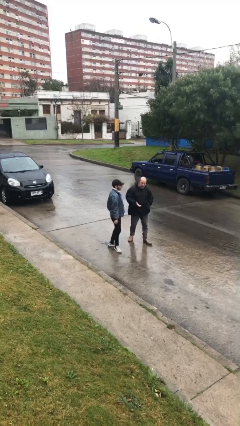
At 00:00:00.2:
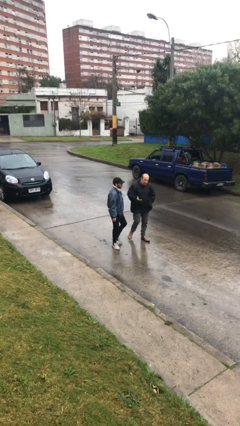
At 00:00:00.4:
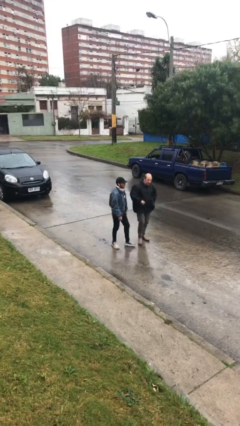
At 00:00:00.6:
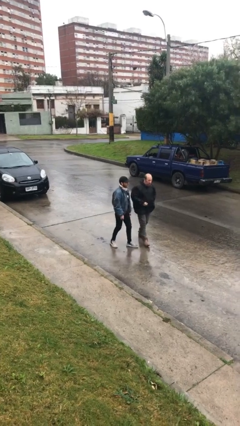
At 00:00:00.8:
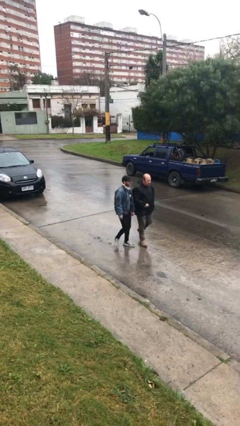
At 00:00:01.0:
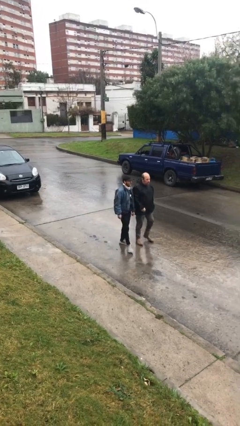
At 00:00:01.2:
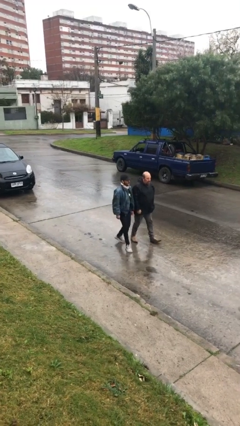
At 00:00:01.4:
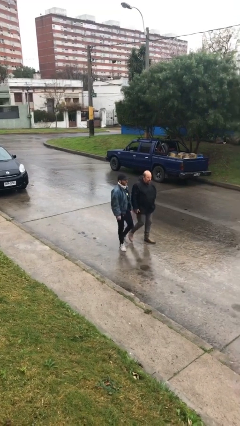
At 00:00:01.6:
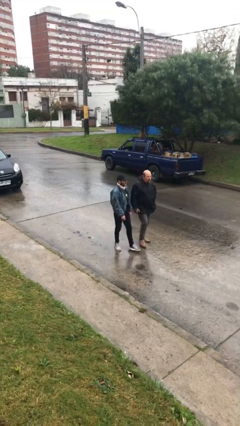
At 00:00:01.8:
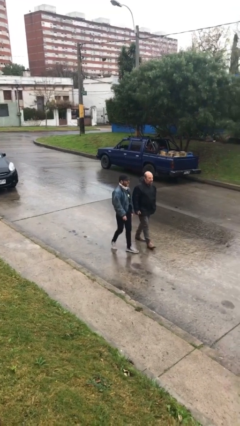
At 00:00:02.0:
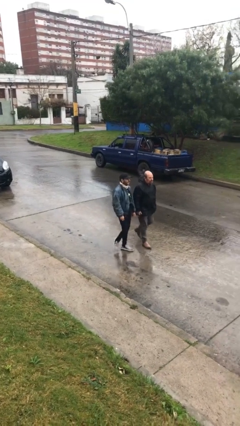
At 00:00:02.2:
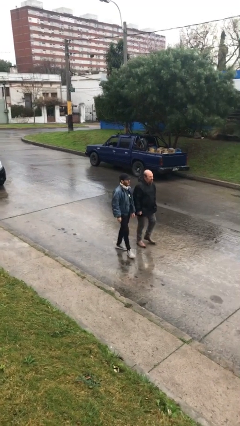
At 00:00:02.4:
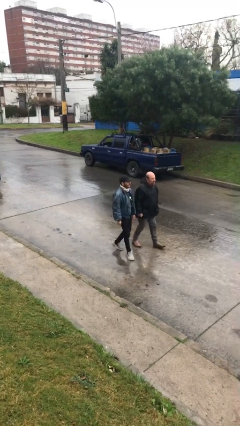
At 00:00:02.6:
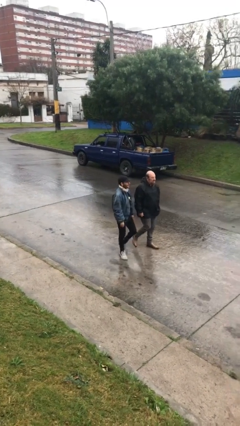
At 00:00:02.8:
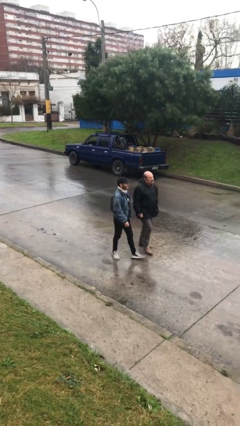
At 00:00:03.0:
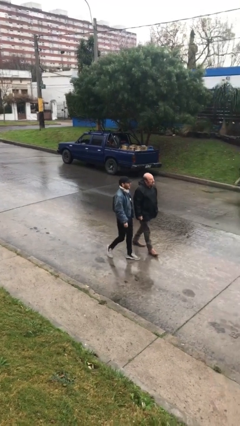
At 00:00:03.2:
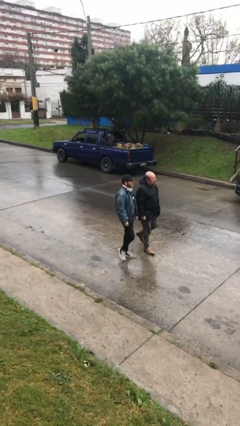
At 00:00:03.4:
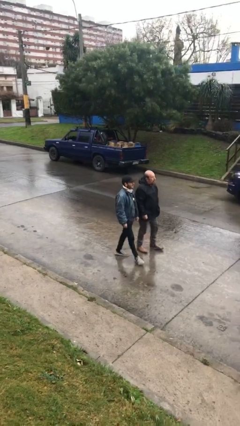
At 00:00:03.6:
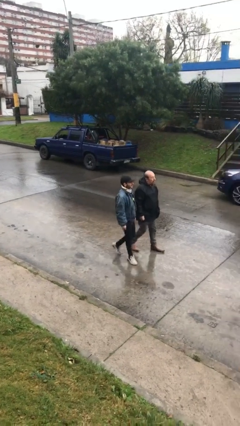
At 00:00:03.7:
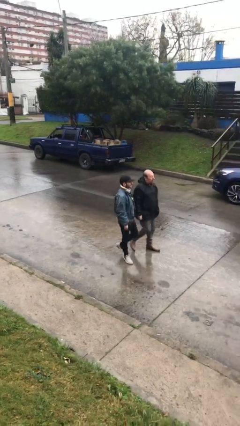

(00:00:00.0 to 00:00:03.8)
person talks to person

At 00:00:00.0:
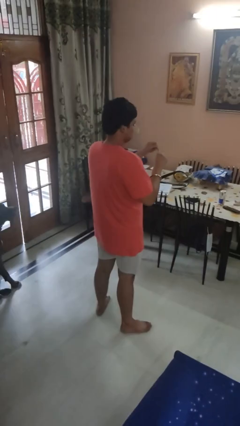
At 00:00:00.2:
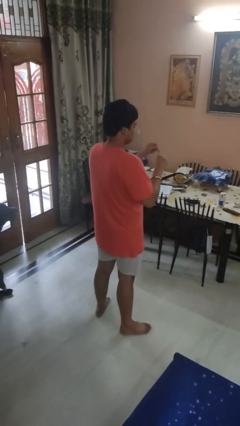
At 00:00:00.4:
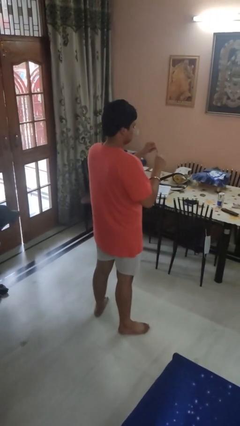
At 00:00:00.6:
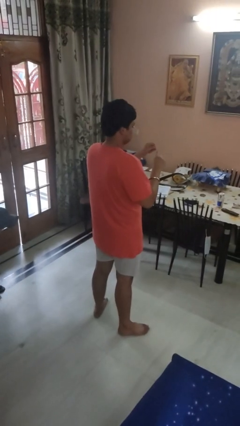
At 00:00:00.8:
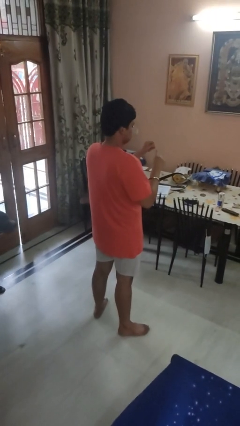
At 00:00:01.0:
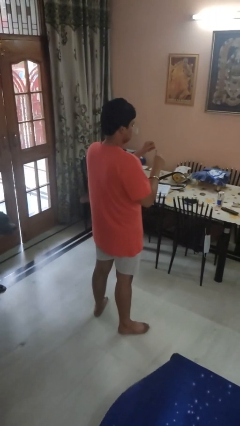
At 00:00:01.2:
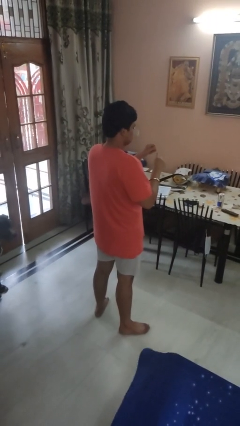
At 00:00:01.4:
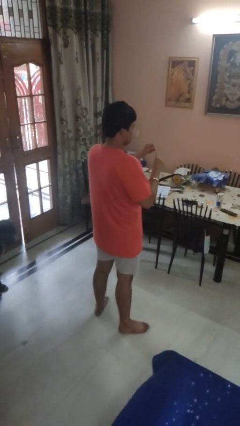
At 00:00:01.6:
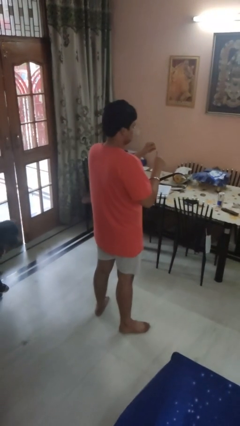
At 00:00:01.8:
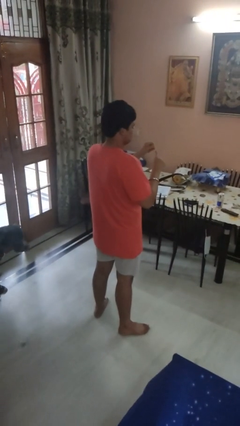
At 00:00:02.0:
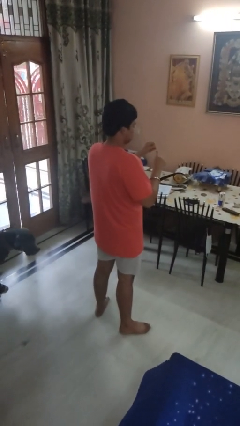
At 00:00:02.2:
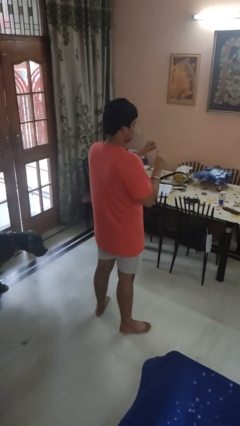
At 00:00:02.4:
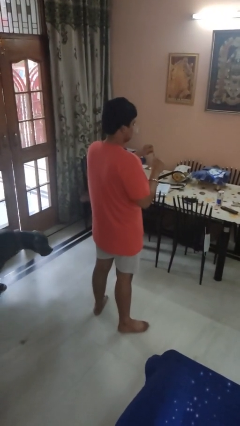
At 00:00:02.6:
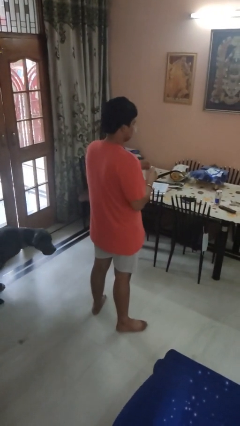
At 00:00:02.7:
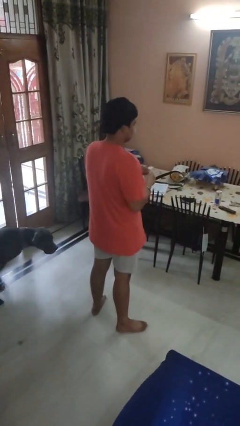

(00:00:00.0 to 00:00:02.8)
person files fingernails

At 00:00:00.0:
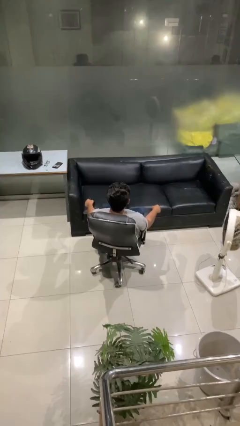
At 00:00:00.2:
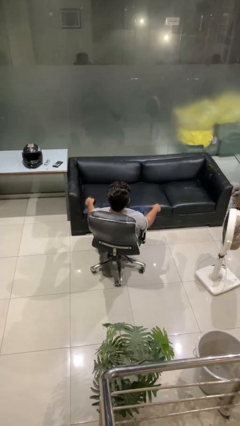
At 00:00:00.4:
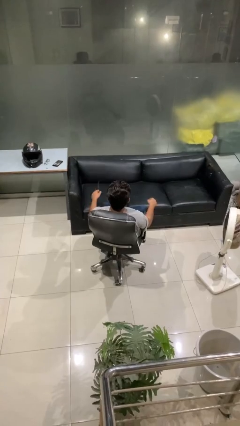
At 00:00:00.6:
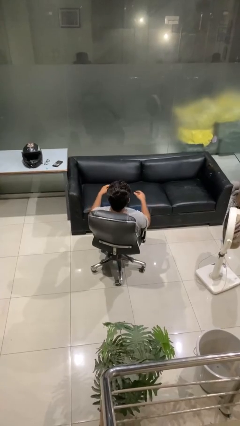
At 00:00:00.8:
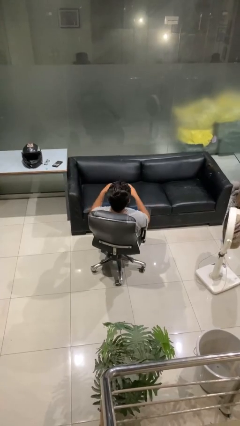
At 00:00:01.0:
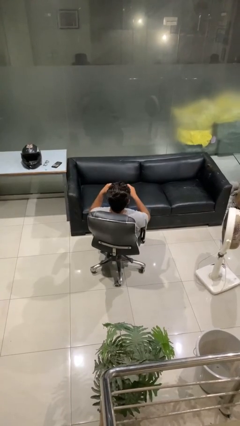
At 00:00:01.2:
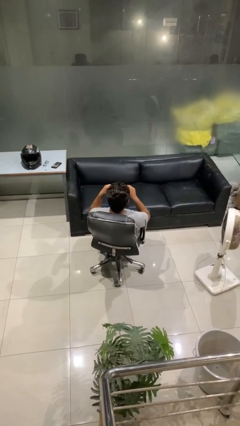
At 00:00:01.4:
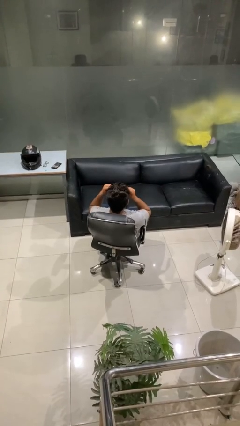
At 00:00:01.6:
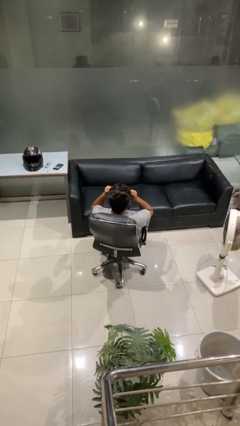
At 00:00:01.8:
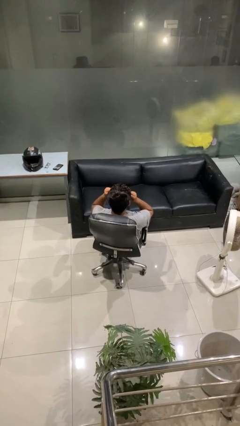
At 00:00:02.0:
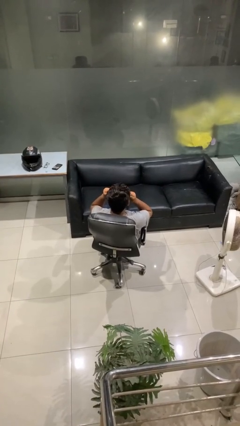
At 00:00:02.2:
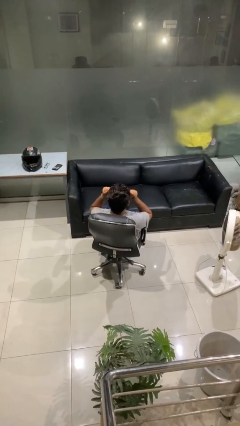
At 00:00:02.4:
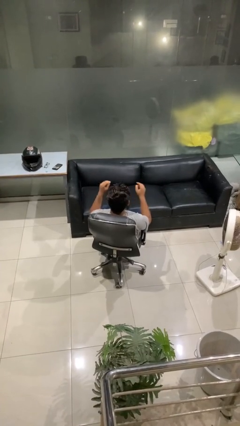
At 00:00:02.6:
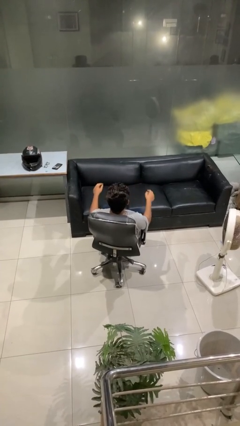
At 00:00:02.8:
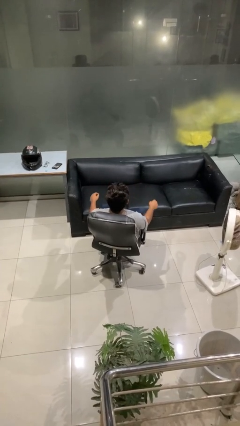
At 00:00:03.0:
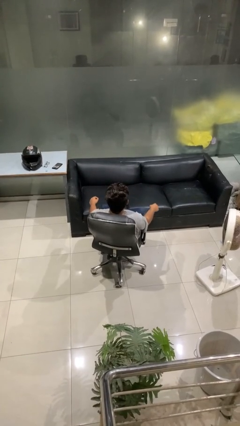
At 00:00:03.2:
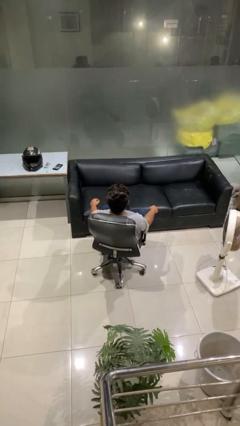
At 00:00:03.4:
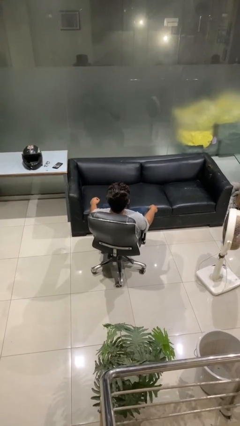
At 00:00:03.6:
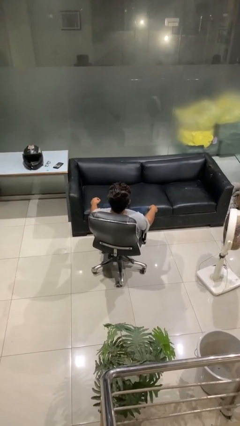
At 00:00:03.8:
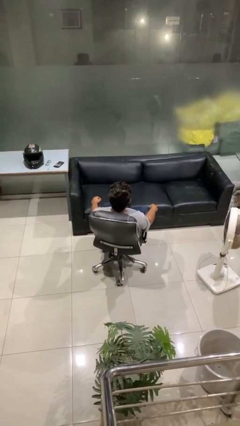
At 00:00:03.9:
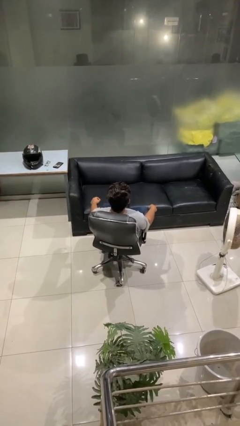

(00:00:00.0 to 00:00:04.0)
person puts on sunglasses

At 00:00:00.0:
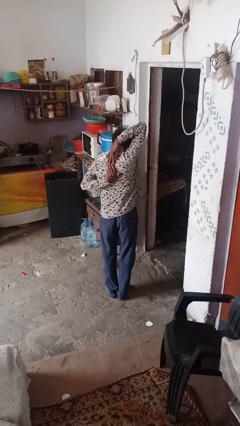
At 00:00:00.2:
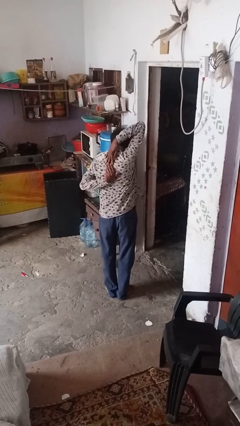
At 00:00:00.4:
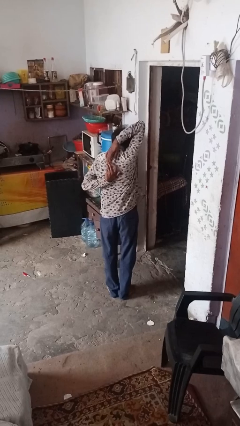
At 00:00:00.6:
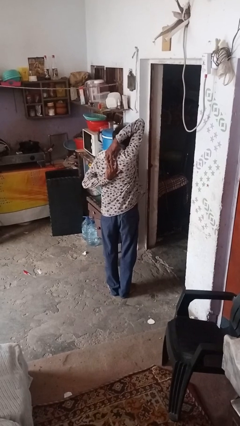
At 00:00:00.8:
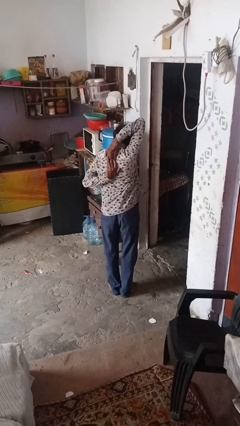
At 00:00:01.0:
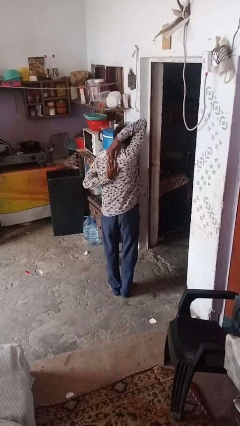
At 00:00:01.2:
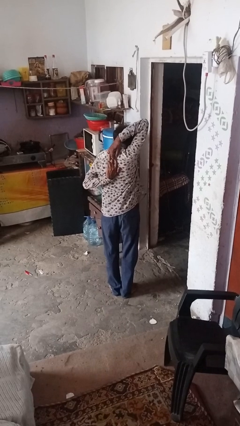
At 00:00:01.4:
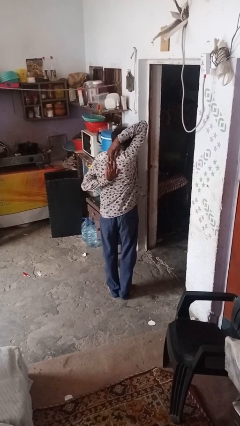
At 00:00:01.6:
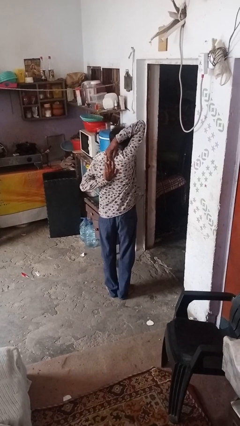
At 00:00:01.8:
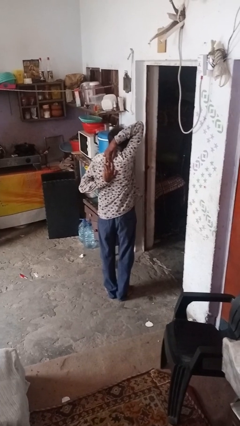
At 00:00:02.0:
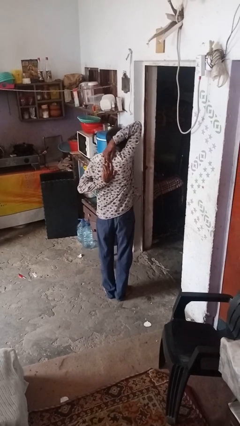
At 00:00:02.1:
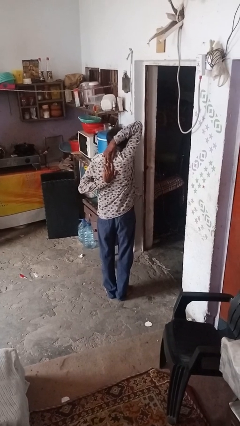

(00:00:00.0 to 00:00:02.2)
person stretches arms to side

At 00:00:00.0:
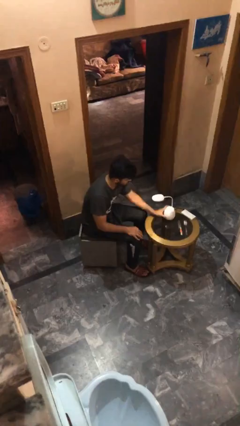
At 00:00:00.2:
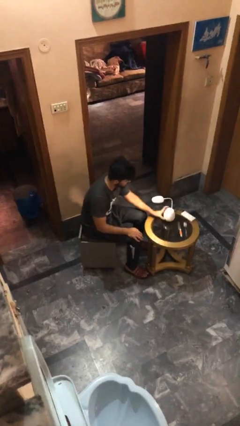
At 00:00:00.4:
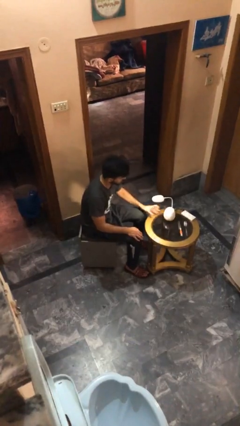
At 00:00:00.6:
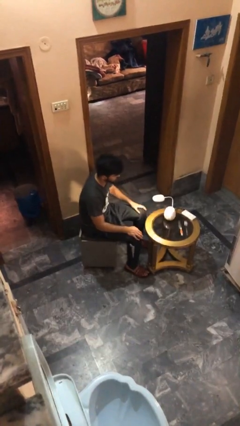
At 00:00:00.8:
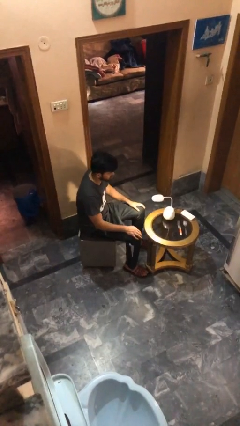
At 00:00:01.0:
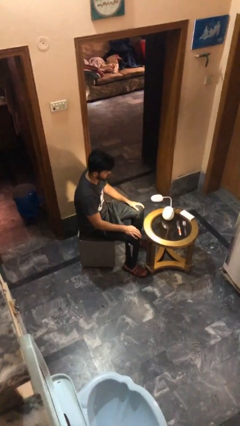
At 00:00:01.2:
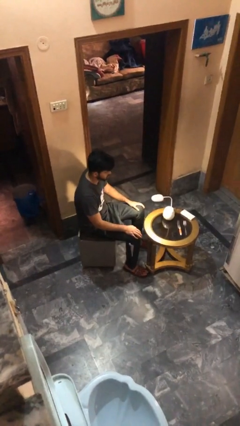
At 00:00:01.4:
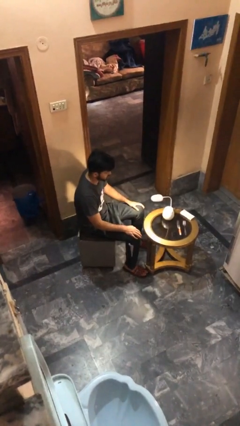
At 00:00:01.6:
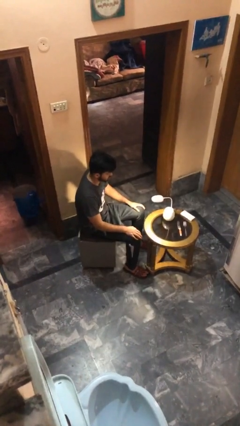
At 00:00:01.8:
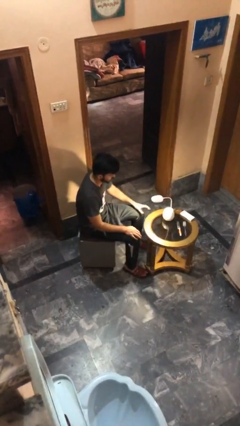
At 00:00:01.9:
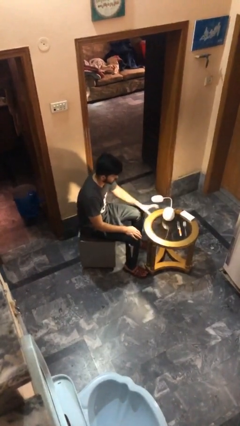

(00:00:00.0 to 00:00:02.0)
person turns on lamp

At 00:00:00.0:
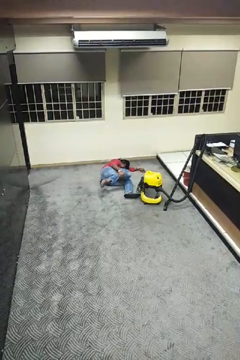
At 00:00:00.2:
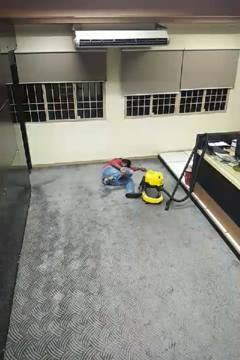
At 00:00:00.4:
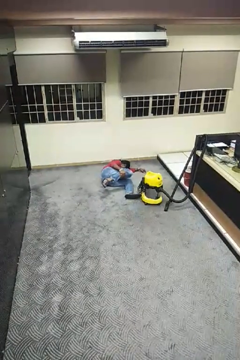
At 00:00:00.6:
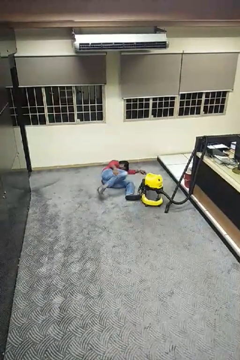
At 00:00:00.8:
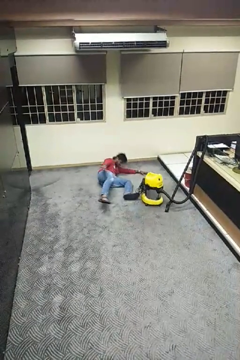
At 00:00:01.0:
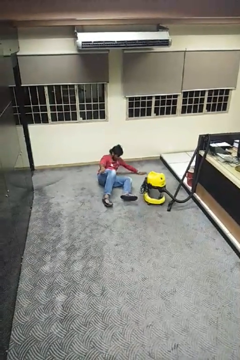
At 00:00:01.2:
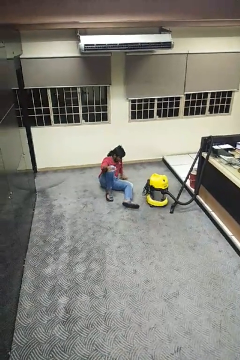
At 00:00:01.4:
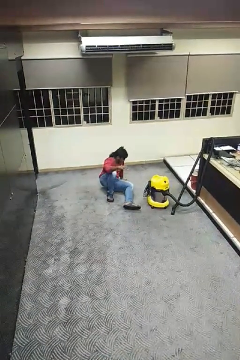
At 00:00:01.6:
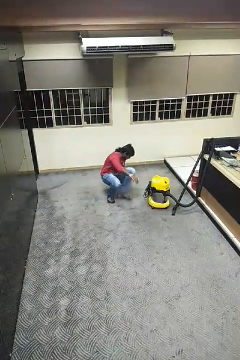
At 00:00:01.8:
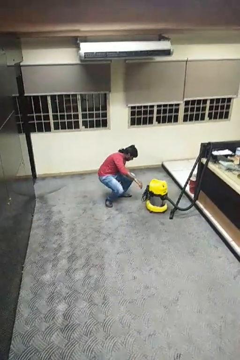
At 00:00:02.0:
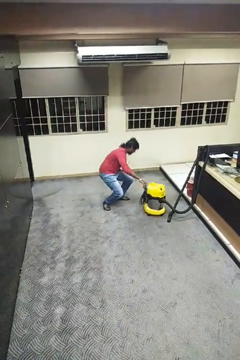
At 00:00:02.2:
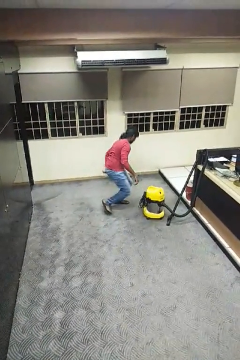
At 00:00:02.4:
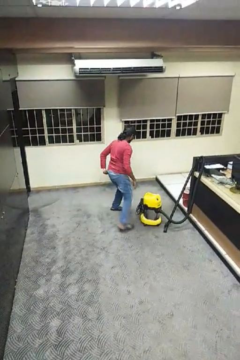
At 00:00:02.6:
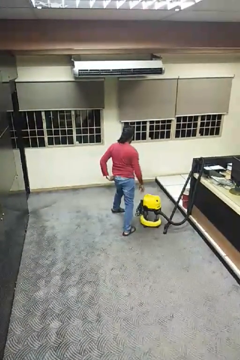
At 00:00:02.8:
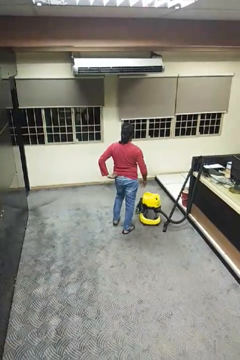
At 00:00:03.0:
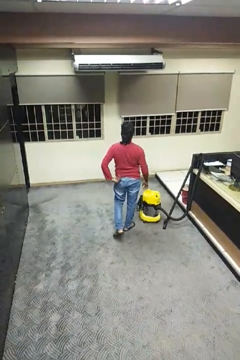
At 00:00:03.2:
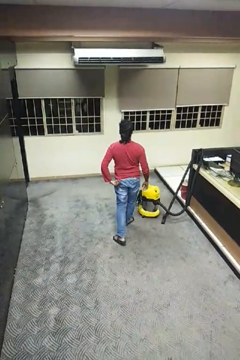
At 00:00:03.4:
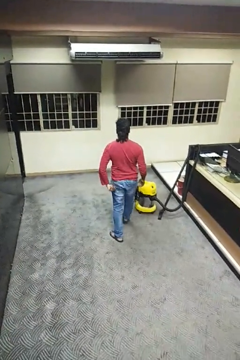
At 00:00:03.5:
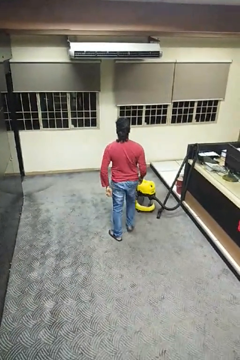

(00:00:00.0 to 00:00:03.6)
person stands up from floor
